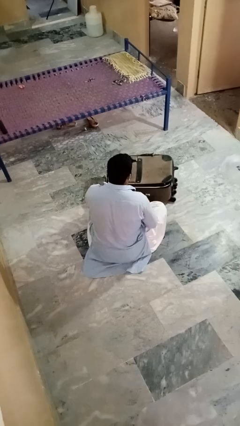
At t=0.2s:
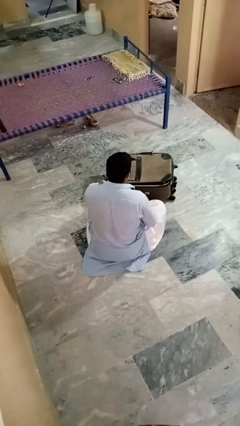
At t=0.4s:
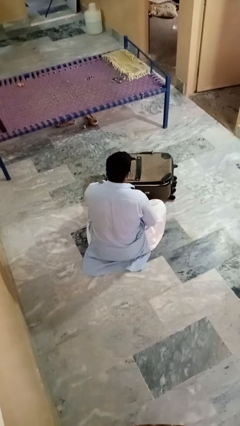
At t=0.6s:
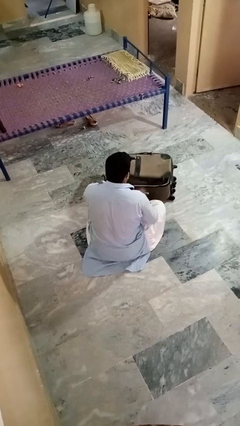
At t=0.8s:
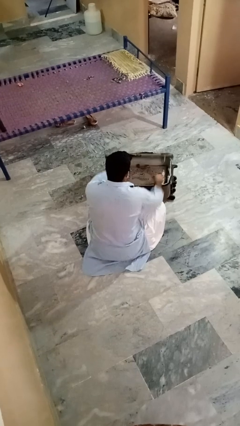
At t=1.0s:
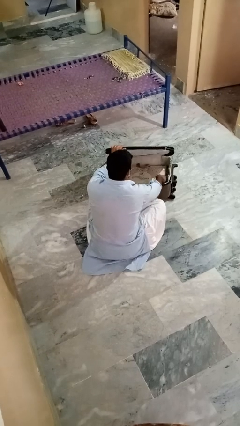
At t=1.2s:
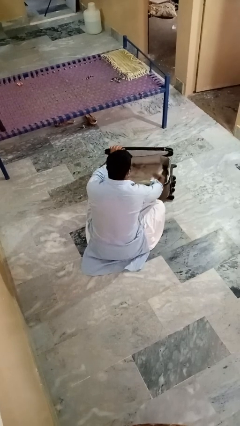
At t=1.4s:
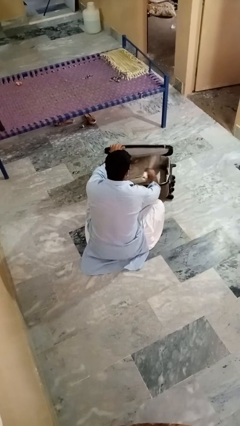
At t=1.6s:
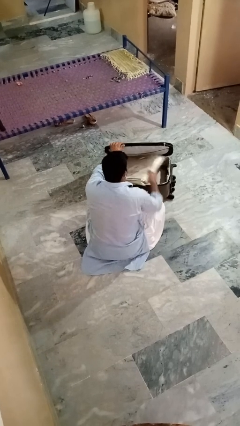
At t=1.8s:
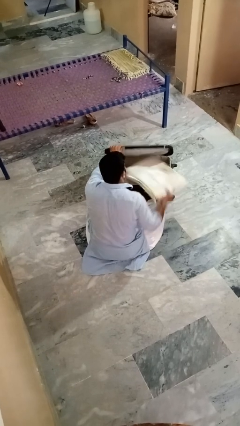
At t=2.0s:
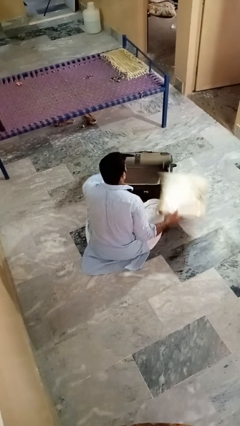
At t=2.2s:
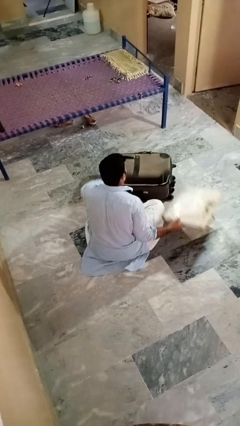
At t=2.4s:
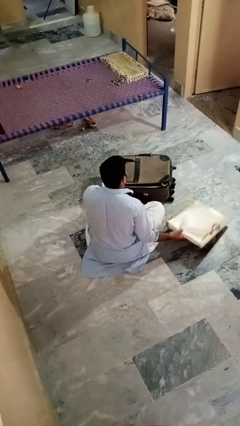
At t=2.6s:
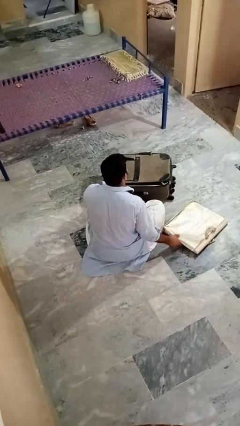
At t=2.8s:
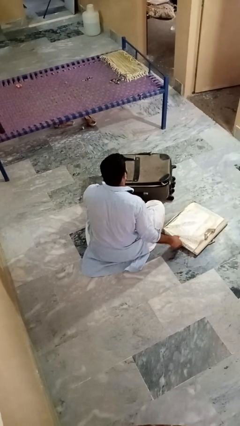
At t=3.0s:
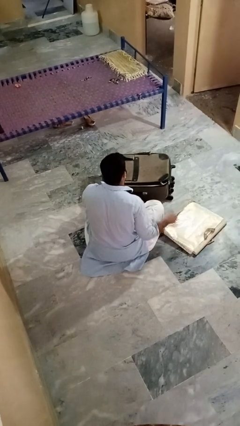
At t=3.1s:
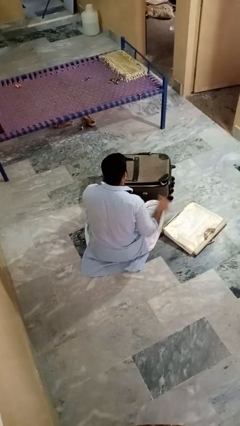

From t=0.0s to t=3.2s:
person takes object from bag

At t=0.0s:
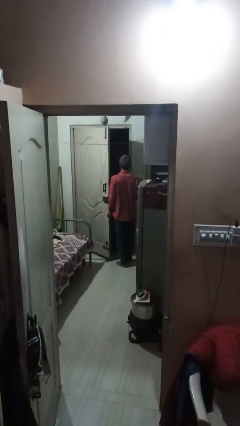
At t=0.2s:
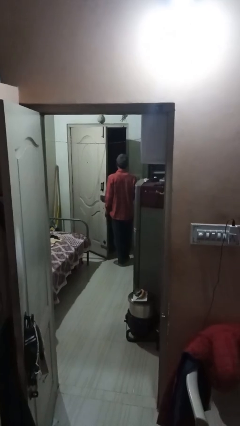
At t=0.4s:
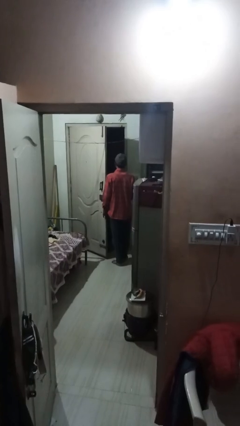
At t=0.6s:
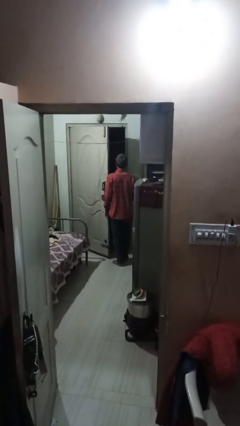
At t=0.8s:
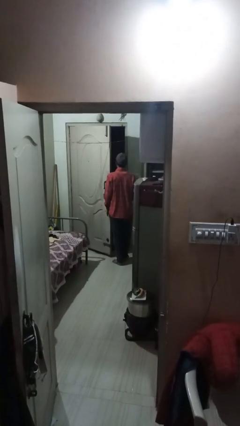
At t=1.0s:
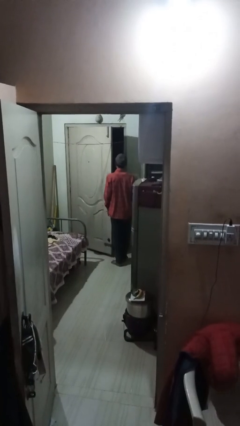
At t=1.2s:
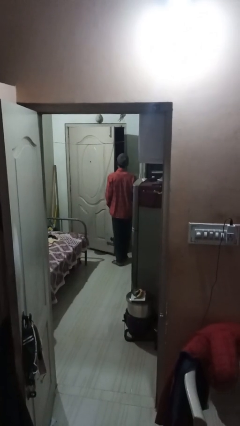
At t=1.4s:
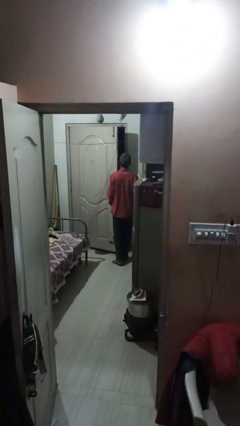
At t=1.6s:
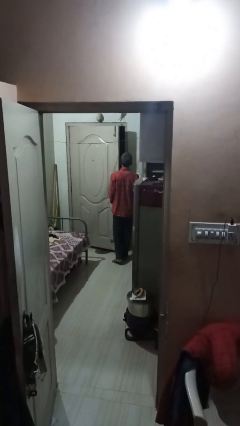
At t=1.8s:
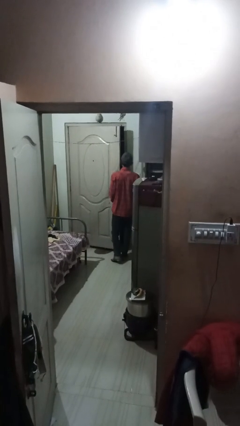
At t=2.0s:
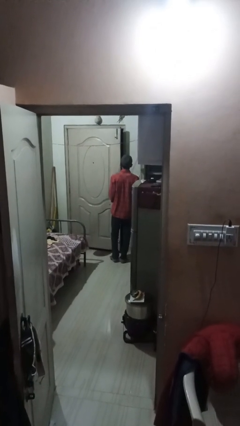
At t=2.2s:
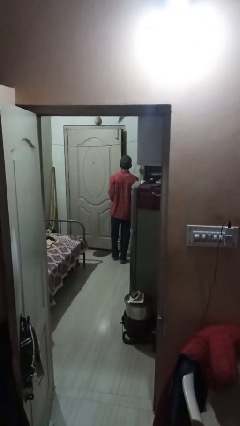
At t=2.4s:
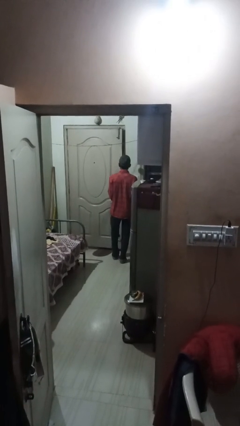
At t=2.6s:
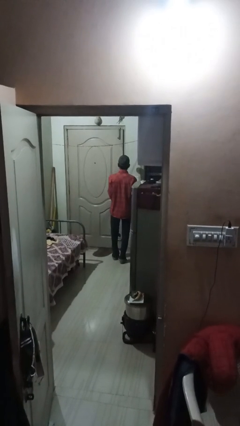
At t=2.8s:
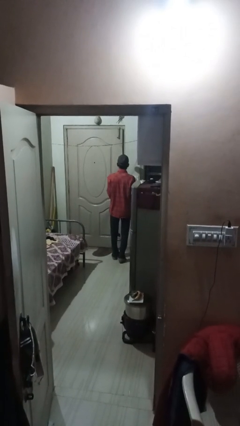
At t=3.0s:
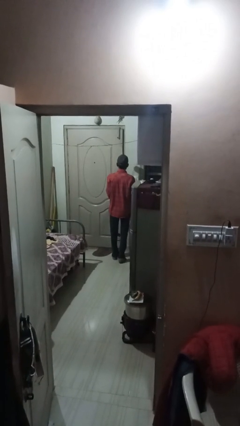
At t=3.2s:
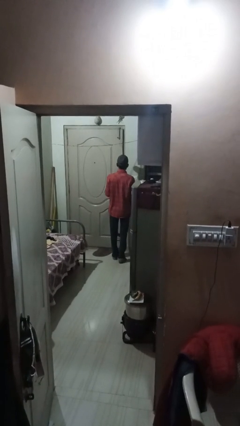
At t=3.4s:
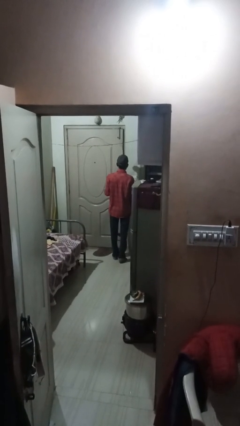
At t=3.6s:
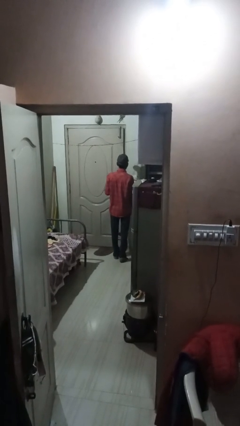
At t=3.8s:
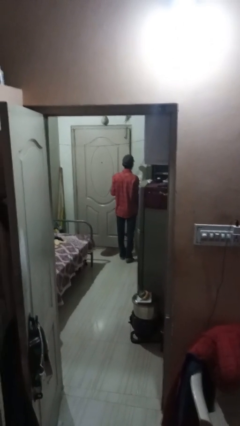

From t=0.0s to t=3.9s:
person closes facility door

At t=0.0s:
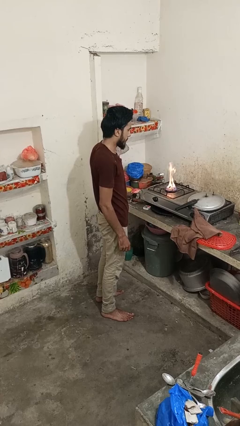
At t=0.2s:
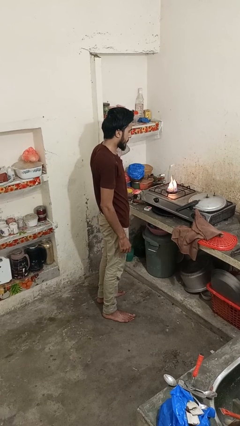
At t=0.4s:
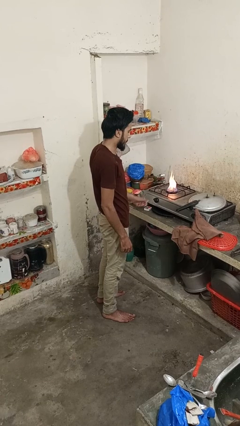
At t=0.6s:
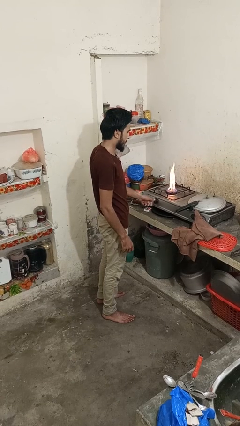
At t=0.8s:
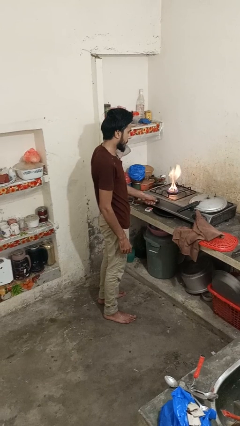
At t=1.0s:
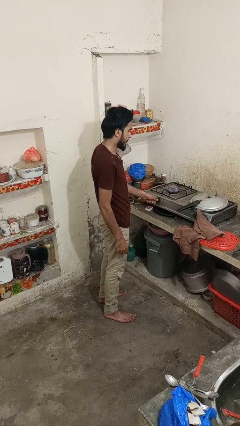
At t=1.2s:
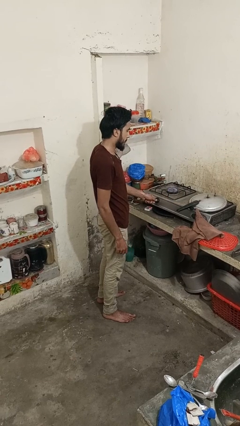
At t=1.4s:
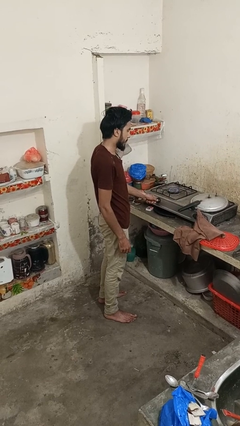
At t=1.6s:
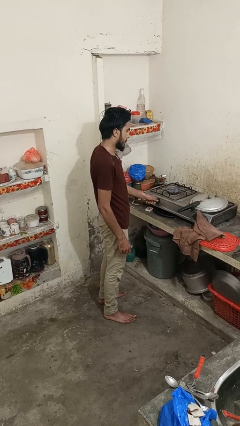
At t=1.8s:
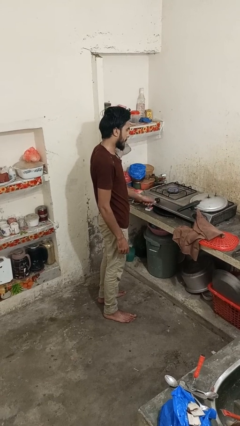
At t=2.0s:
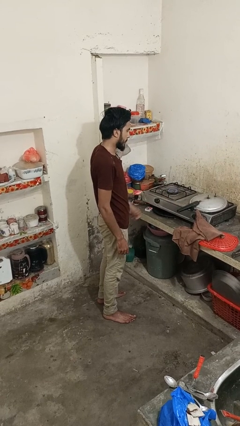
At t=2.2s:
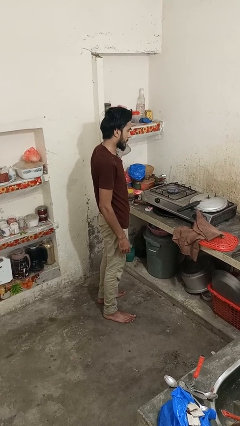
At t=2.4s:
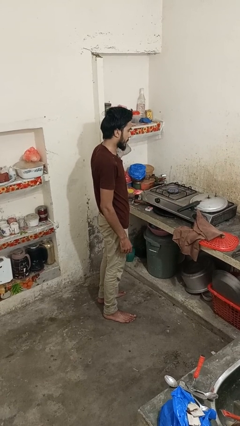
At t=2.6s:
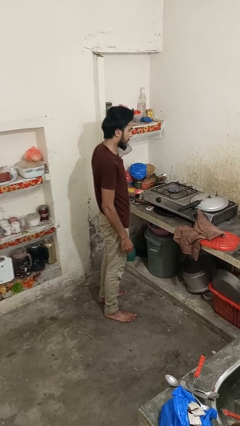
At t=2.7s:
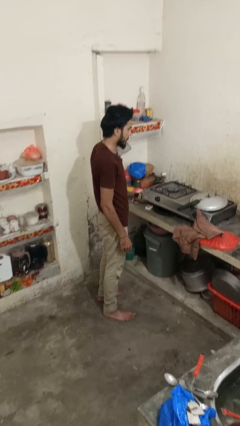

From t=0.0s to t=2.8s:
person turns off stovetop

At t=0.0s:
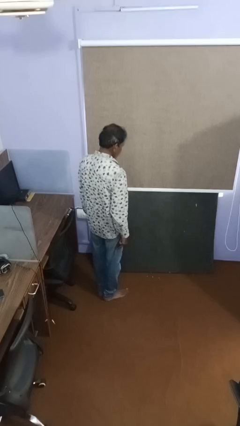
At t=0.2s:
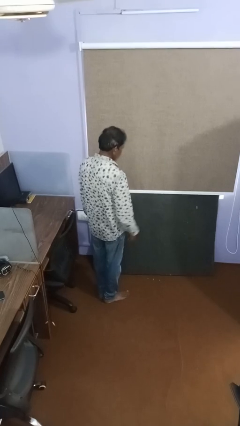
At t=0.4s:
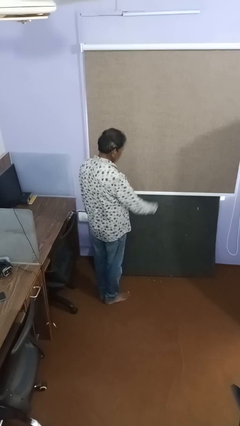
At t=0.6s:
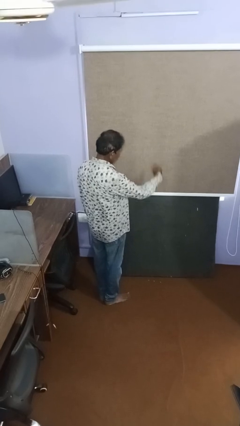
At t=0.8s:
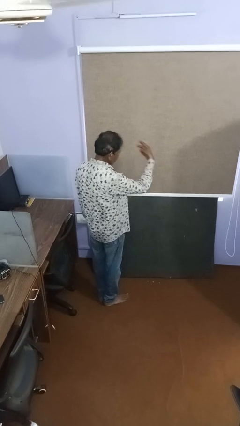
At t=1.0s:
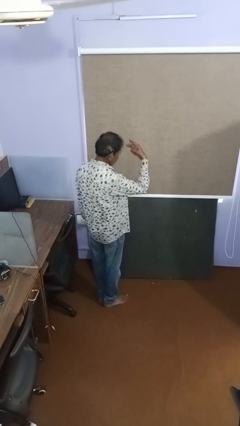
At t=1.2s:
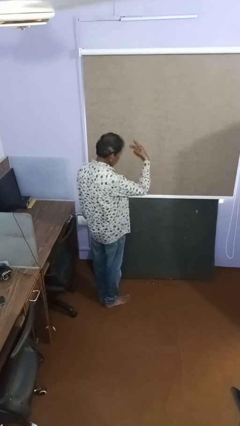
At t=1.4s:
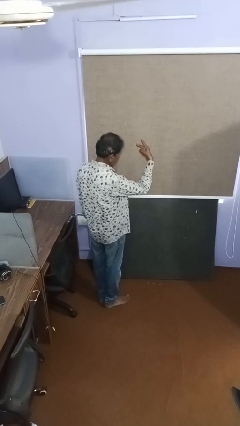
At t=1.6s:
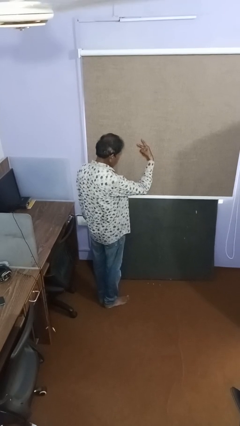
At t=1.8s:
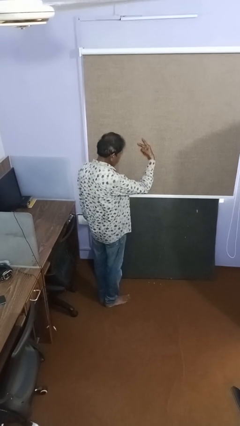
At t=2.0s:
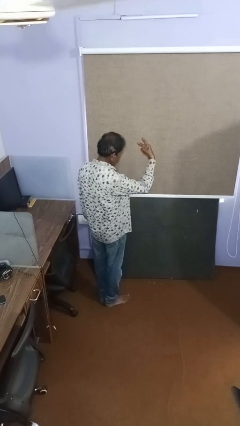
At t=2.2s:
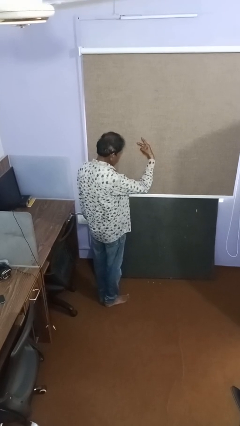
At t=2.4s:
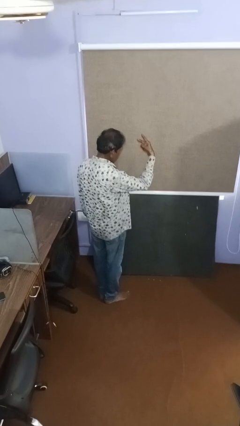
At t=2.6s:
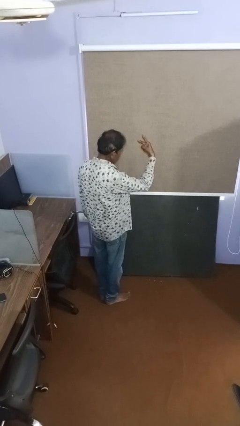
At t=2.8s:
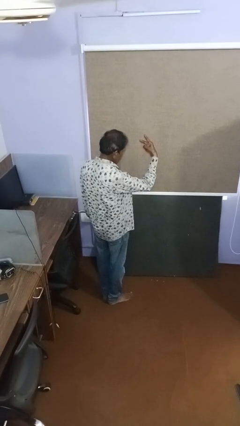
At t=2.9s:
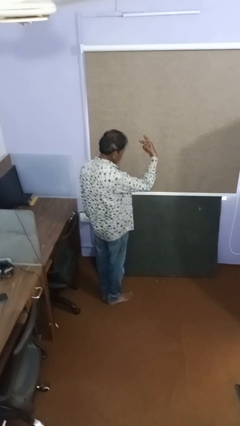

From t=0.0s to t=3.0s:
person gestures peace

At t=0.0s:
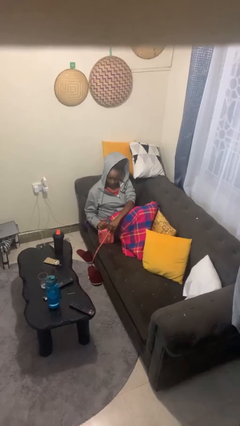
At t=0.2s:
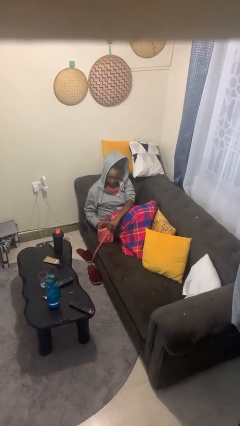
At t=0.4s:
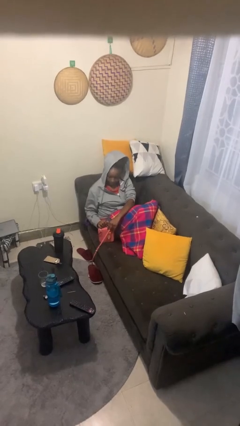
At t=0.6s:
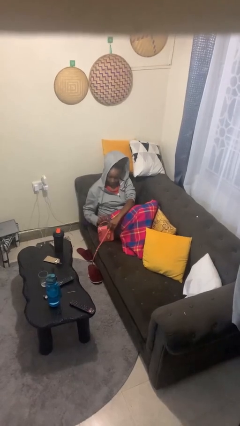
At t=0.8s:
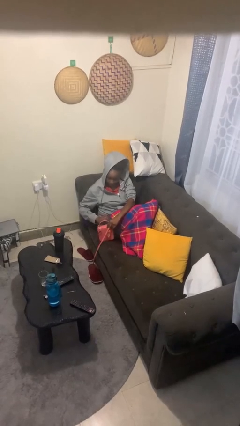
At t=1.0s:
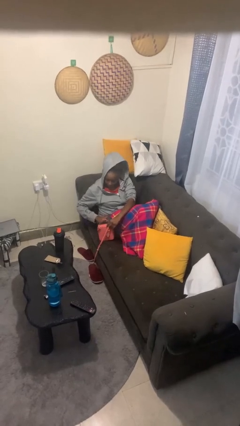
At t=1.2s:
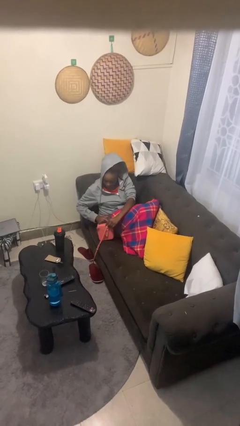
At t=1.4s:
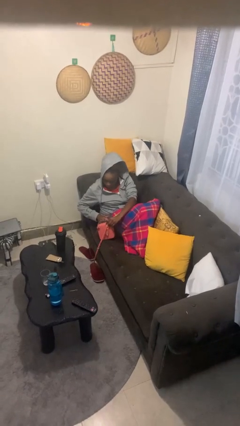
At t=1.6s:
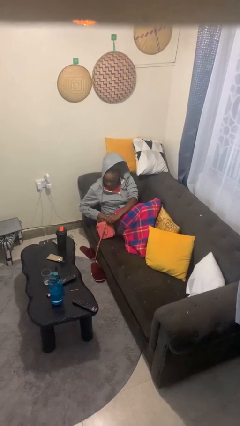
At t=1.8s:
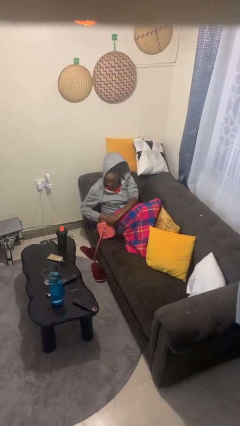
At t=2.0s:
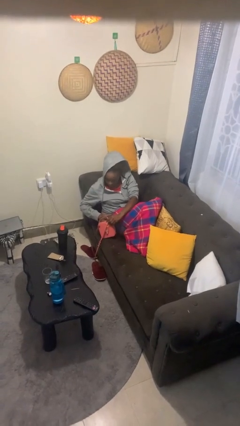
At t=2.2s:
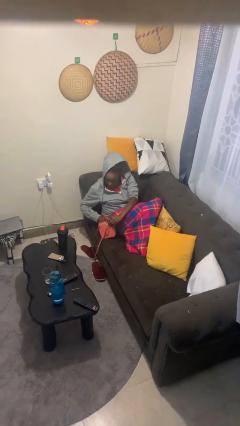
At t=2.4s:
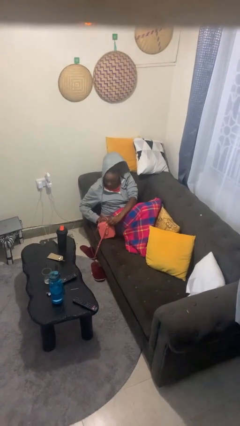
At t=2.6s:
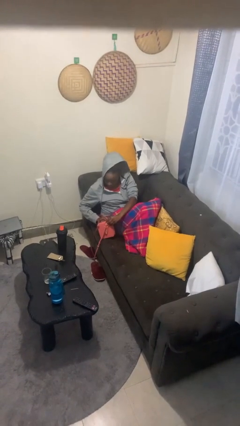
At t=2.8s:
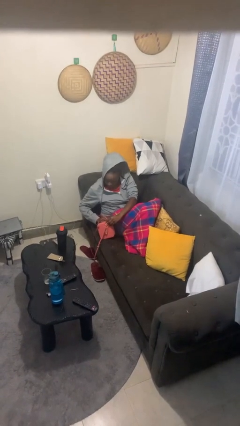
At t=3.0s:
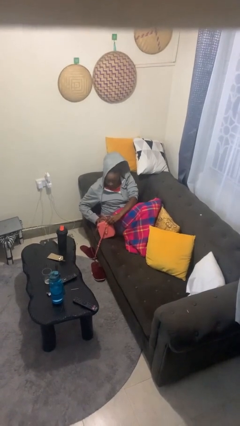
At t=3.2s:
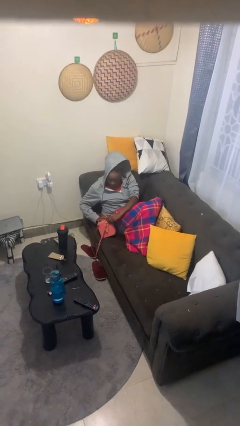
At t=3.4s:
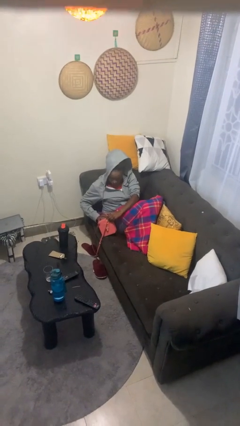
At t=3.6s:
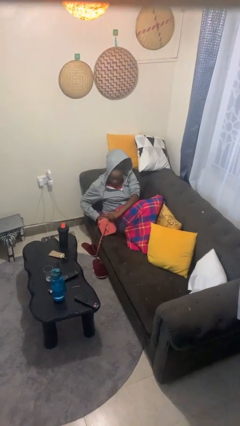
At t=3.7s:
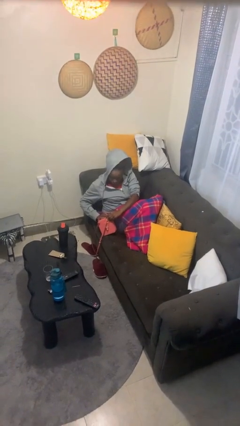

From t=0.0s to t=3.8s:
person searches in purse

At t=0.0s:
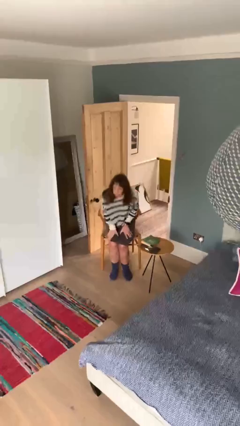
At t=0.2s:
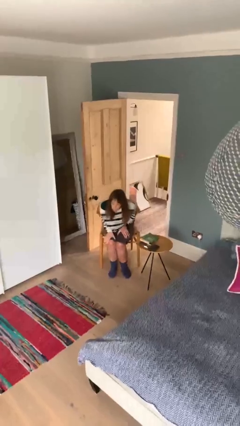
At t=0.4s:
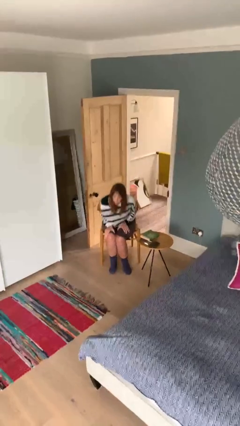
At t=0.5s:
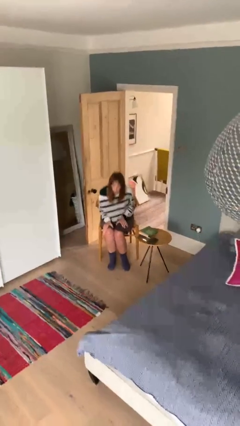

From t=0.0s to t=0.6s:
person sits down
